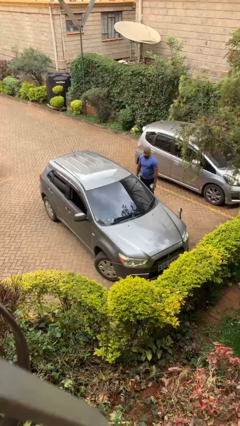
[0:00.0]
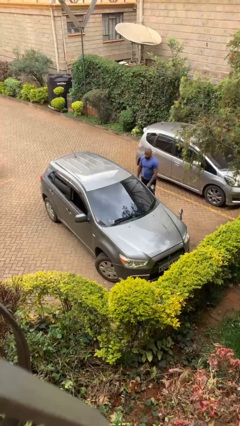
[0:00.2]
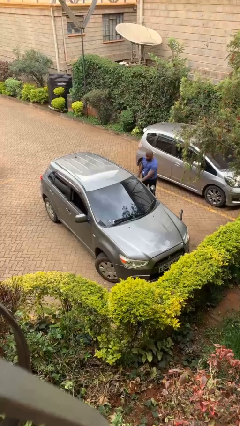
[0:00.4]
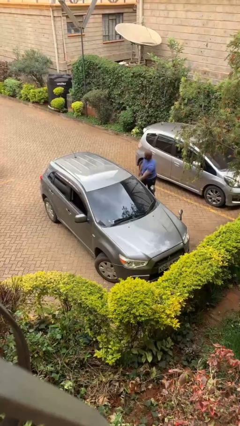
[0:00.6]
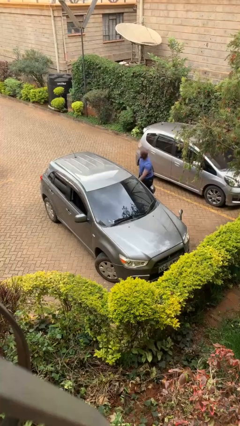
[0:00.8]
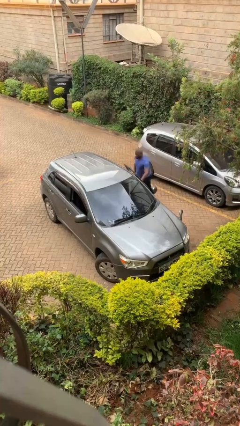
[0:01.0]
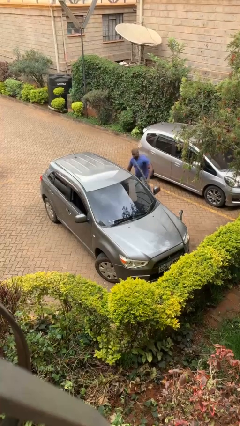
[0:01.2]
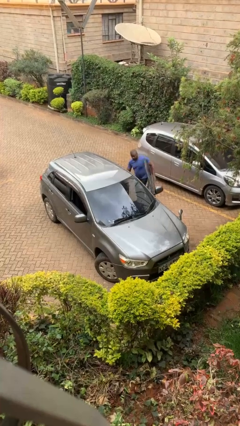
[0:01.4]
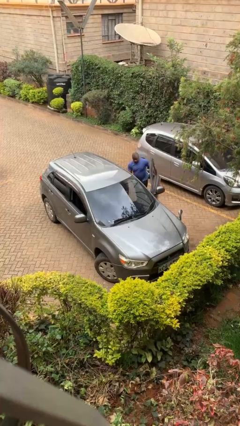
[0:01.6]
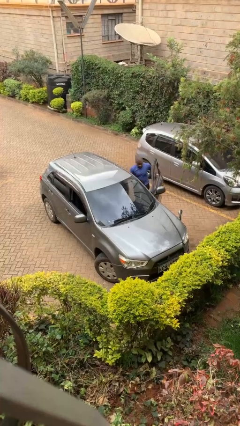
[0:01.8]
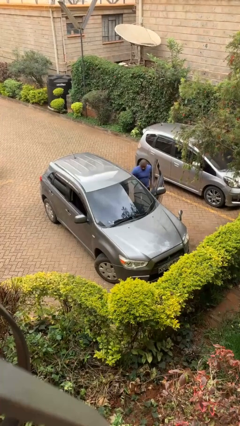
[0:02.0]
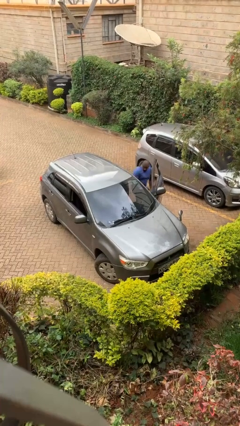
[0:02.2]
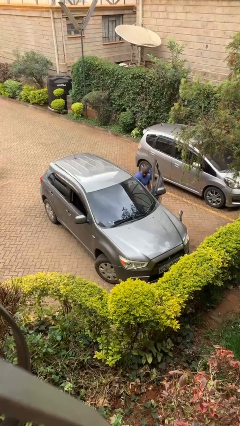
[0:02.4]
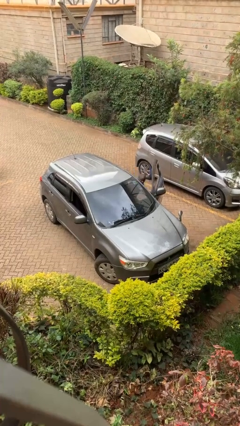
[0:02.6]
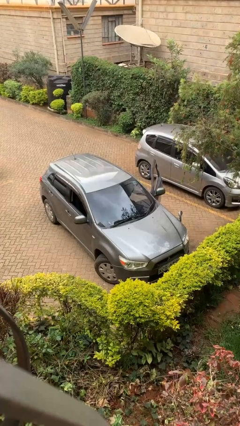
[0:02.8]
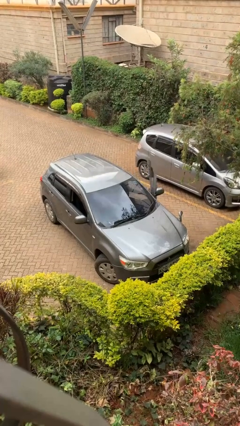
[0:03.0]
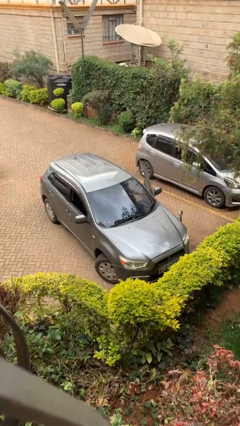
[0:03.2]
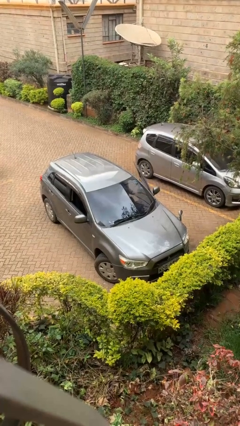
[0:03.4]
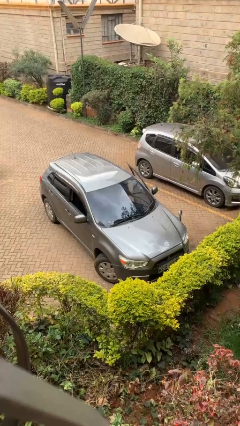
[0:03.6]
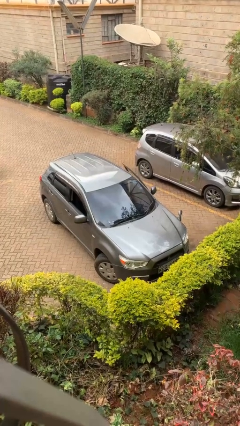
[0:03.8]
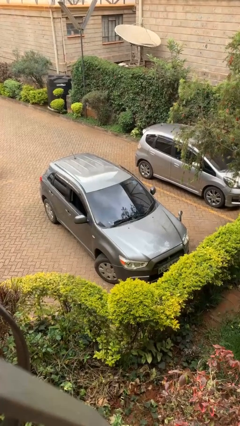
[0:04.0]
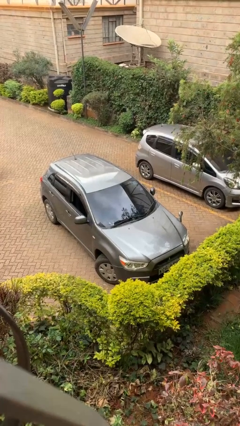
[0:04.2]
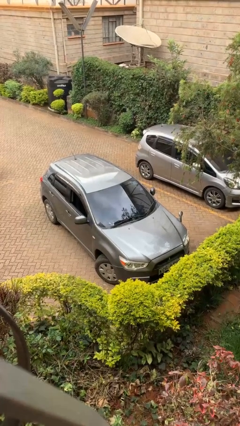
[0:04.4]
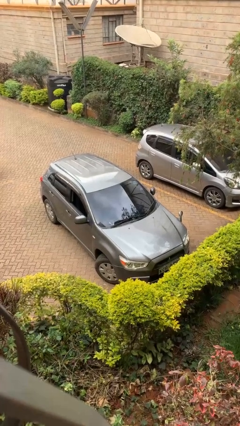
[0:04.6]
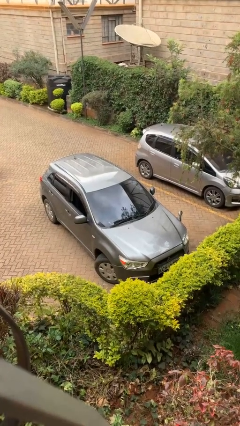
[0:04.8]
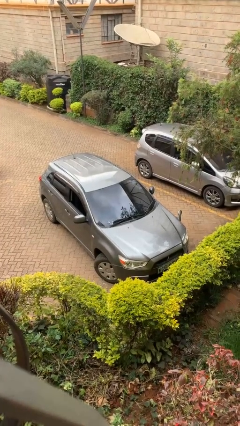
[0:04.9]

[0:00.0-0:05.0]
car picks up person

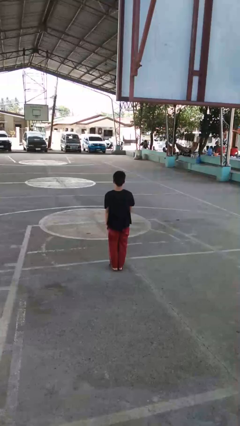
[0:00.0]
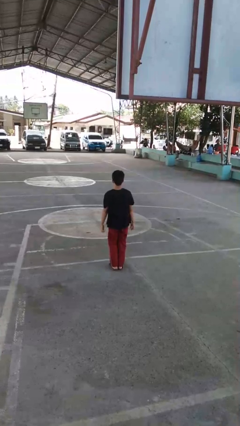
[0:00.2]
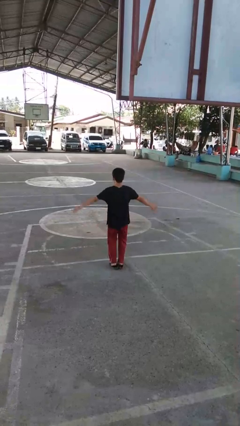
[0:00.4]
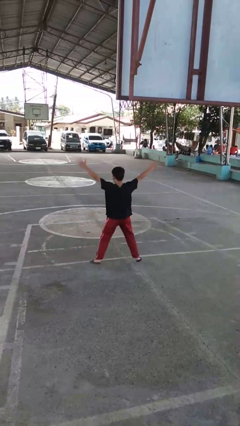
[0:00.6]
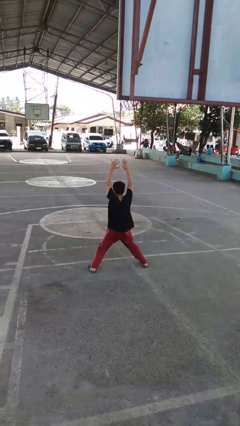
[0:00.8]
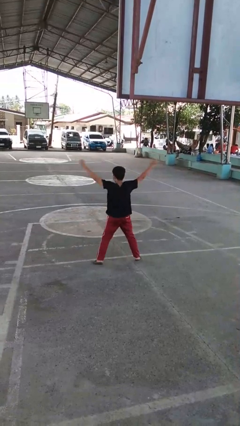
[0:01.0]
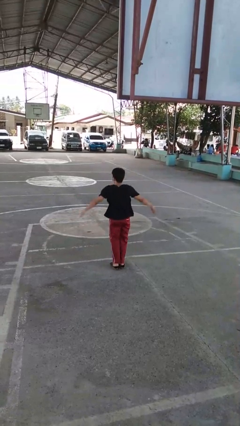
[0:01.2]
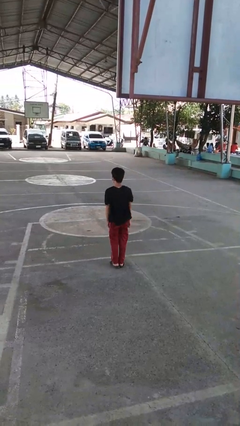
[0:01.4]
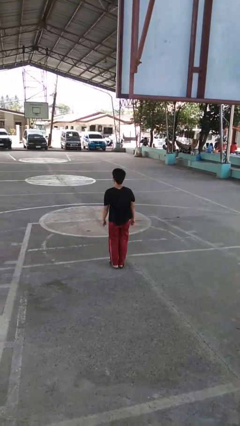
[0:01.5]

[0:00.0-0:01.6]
person exercises with jumping jacks

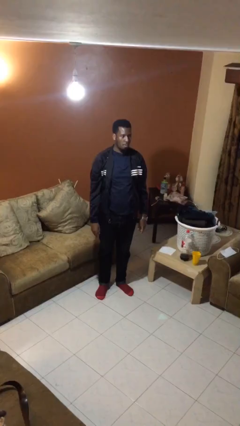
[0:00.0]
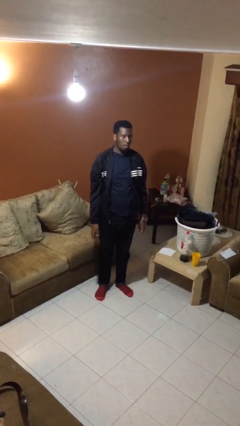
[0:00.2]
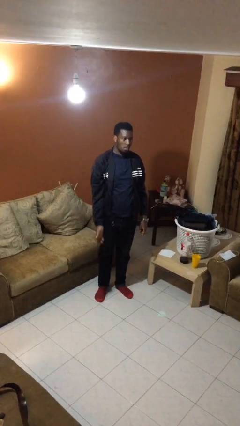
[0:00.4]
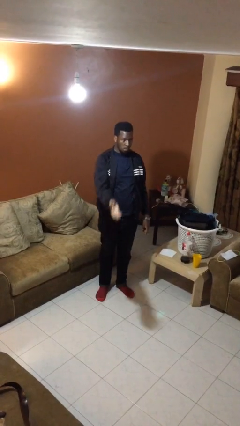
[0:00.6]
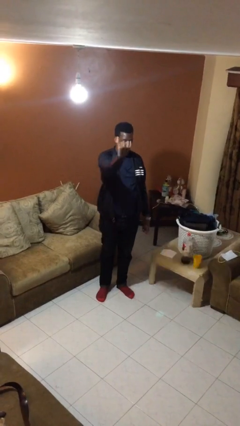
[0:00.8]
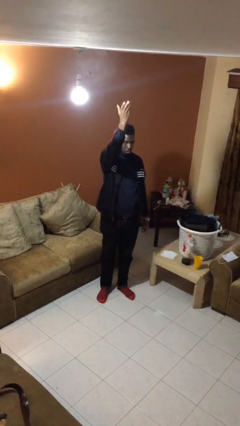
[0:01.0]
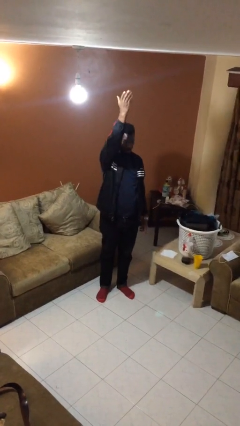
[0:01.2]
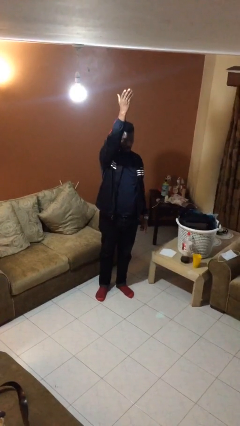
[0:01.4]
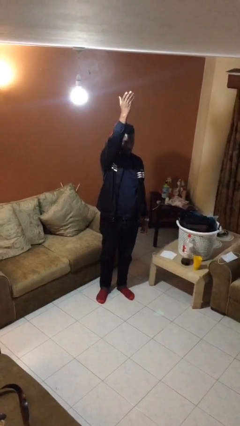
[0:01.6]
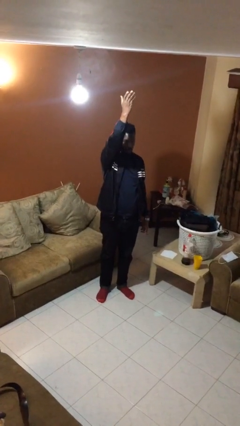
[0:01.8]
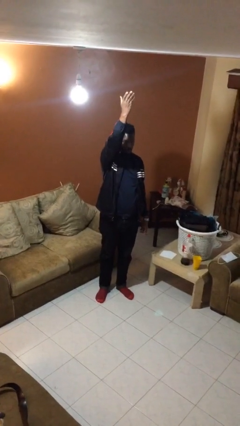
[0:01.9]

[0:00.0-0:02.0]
person gestures swipe up

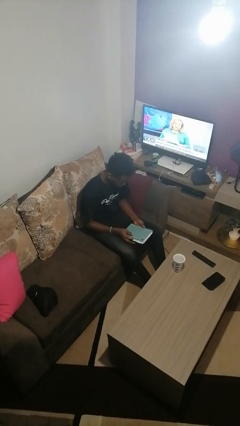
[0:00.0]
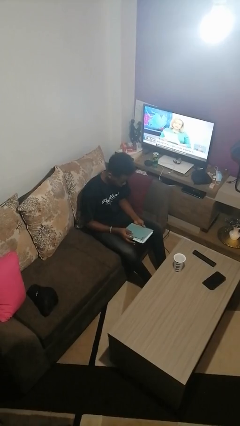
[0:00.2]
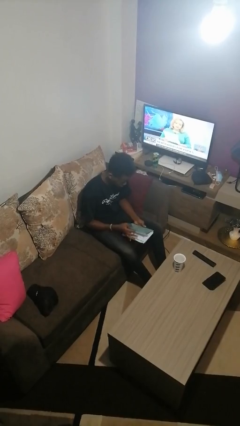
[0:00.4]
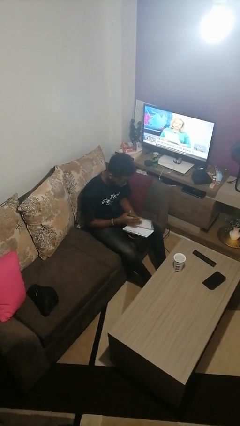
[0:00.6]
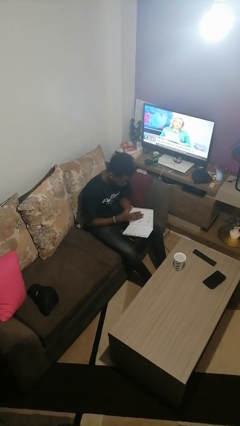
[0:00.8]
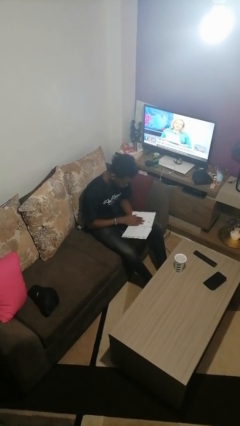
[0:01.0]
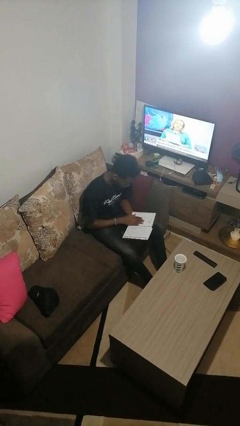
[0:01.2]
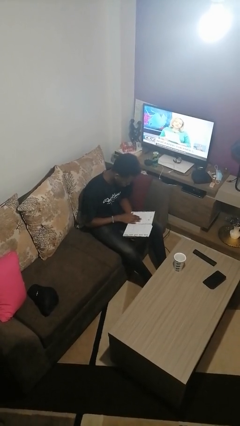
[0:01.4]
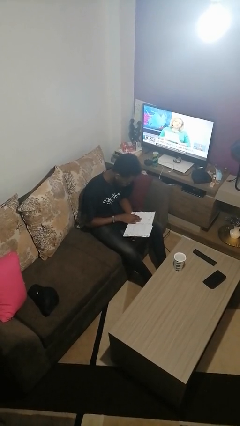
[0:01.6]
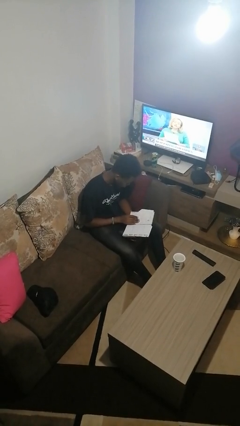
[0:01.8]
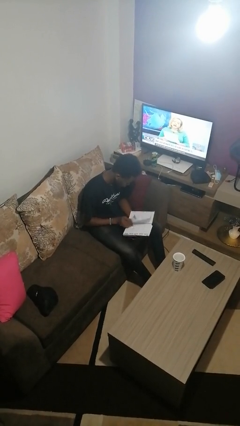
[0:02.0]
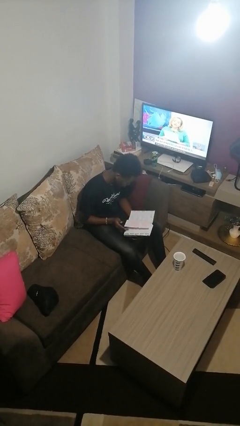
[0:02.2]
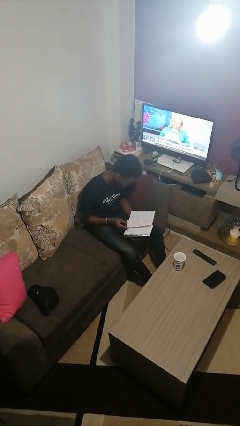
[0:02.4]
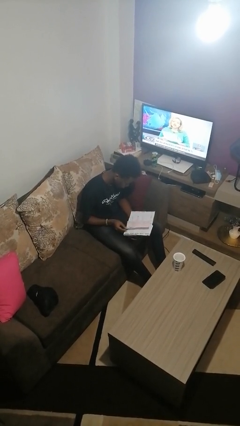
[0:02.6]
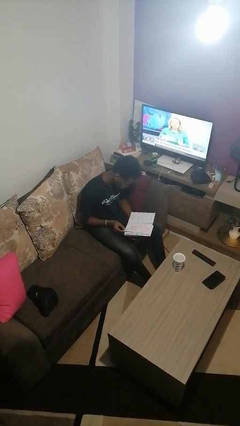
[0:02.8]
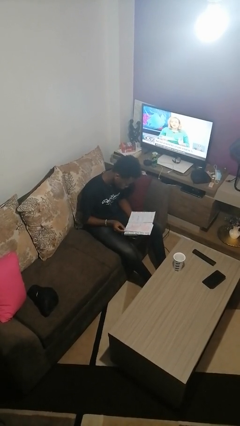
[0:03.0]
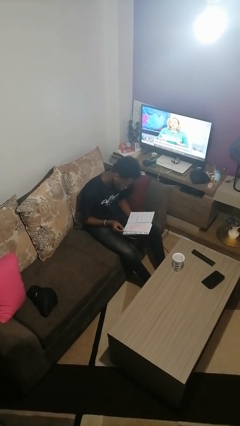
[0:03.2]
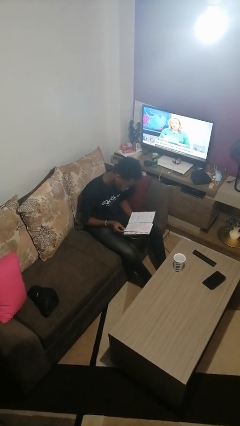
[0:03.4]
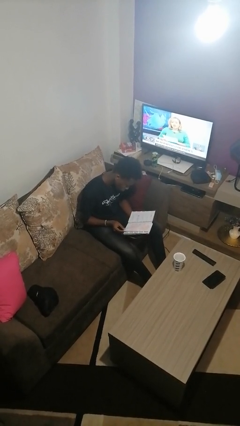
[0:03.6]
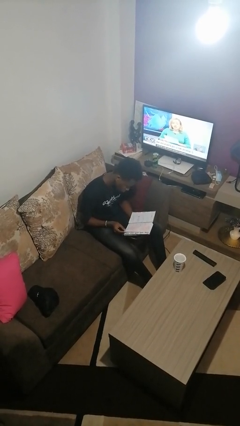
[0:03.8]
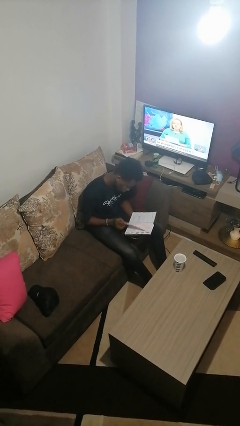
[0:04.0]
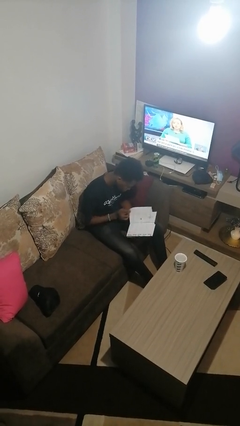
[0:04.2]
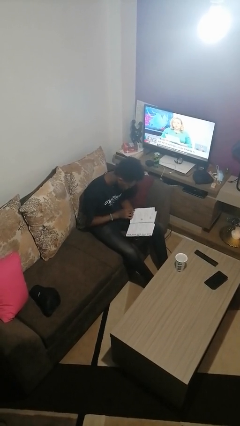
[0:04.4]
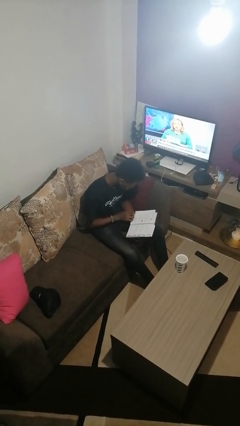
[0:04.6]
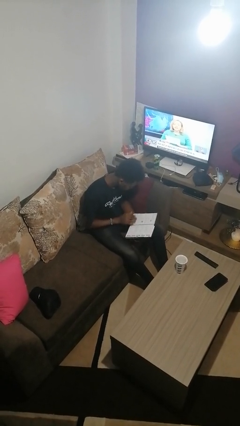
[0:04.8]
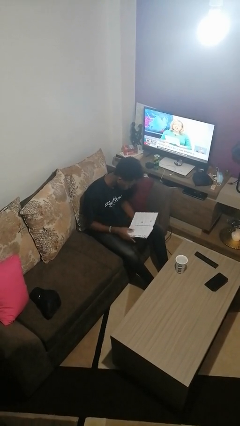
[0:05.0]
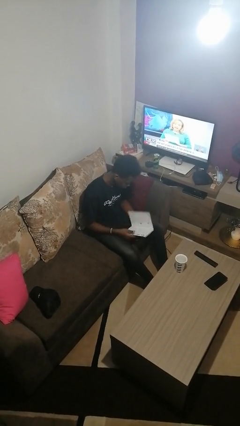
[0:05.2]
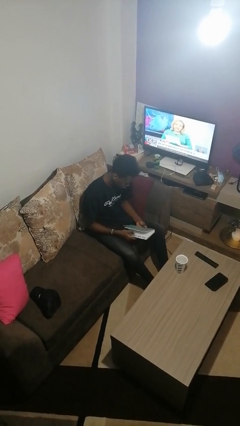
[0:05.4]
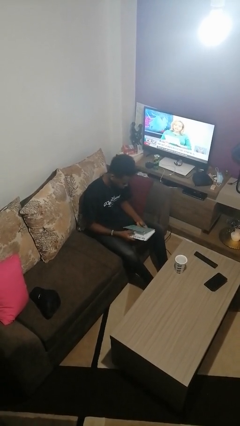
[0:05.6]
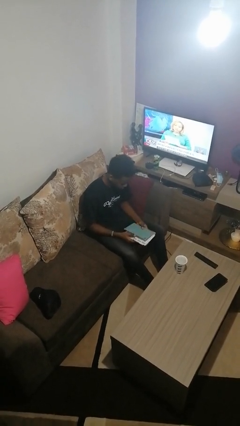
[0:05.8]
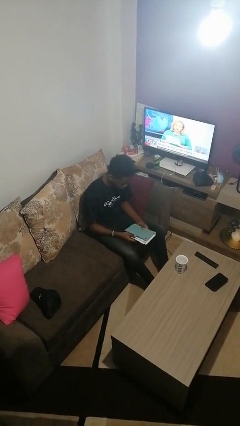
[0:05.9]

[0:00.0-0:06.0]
person reads book

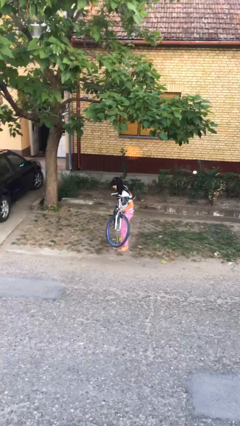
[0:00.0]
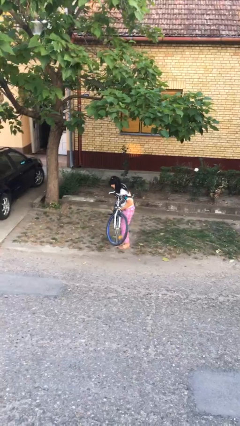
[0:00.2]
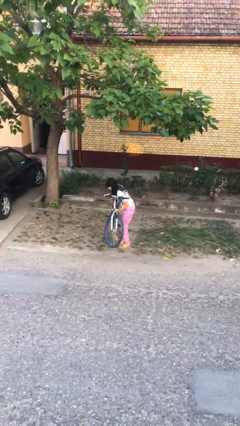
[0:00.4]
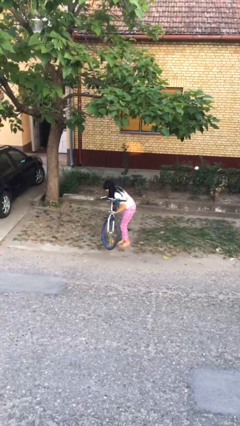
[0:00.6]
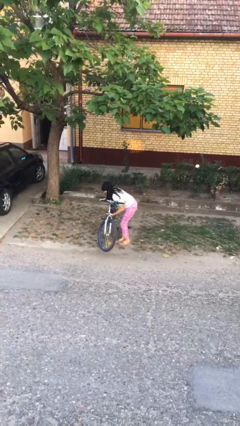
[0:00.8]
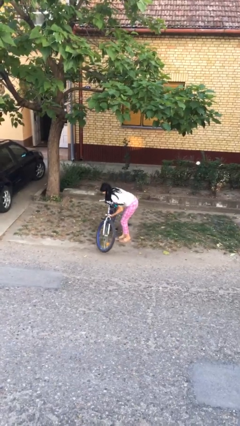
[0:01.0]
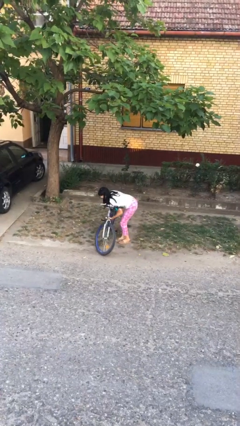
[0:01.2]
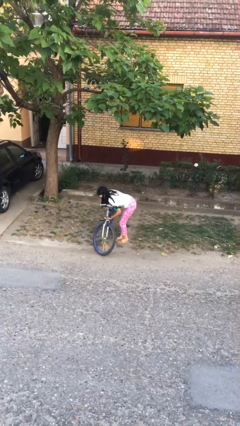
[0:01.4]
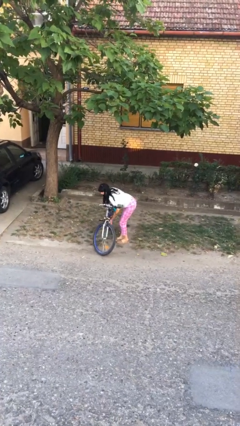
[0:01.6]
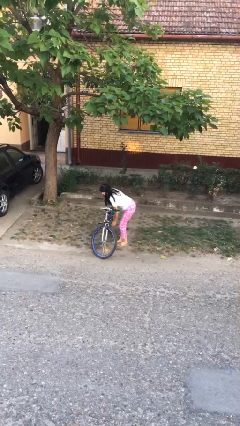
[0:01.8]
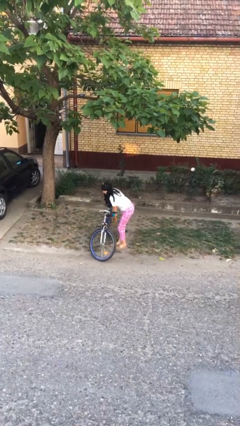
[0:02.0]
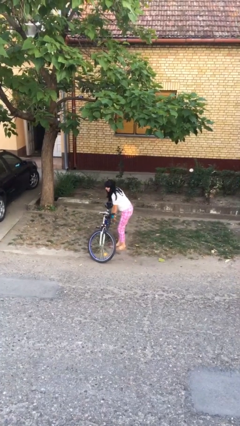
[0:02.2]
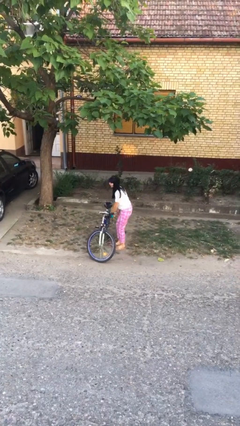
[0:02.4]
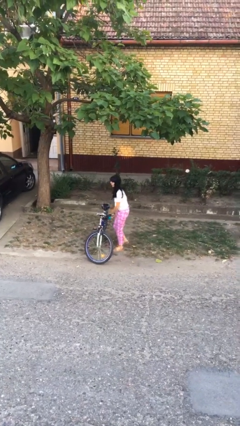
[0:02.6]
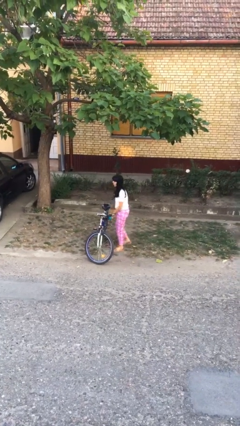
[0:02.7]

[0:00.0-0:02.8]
person puts down object on floor

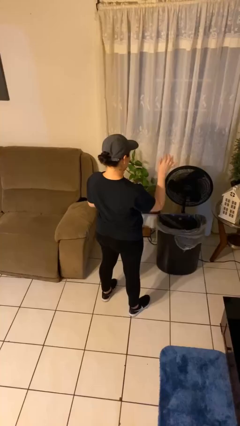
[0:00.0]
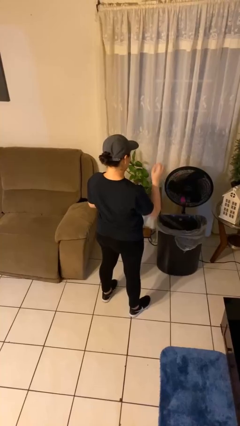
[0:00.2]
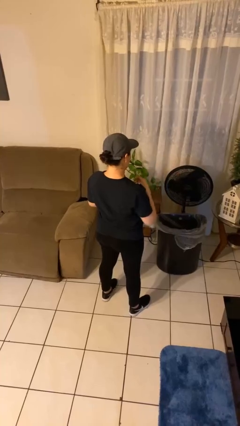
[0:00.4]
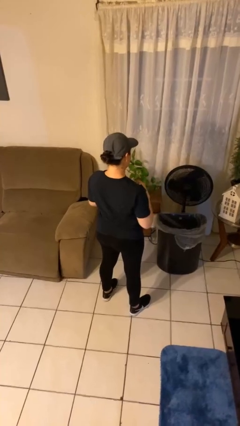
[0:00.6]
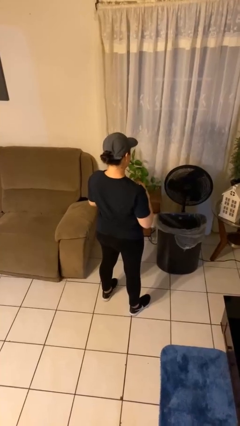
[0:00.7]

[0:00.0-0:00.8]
person discards trash
